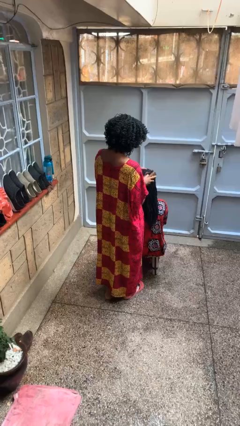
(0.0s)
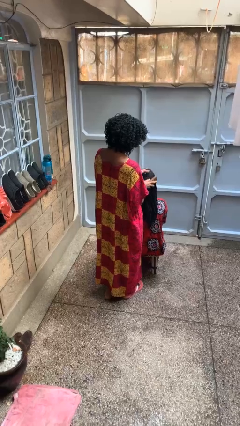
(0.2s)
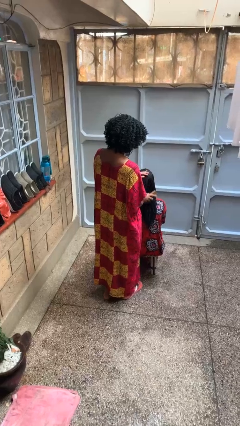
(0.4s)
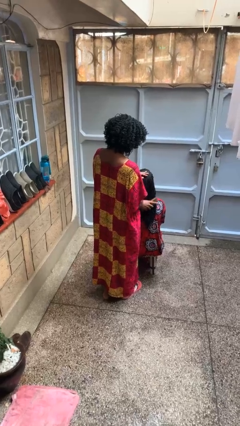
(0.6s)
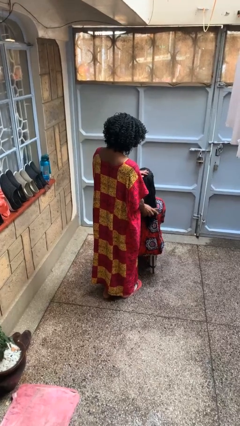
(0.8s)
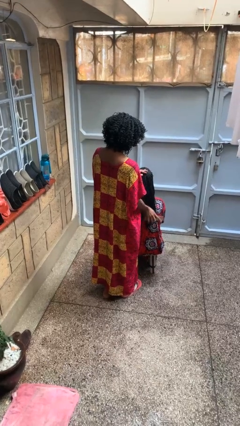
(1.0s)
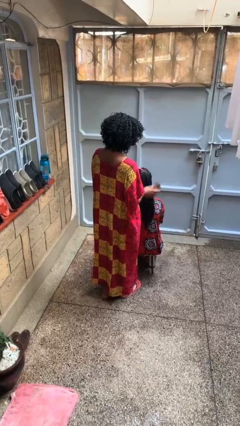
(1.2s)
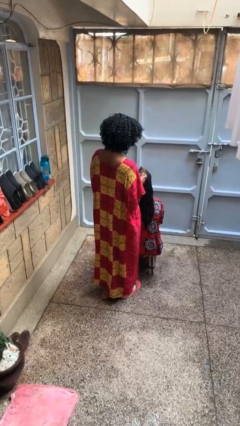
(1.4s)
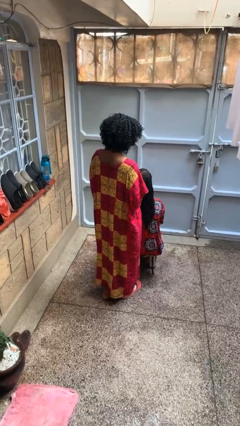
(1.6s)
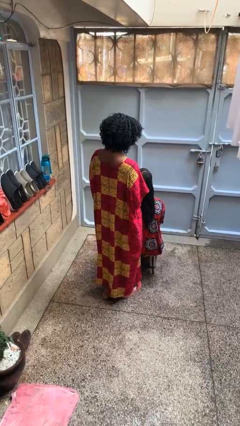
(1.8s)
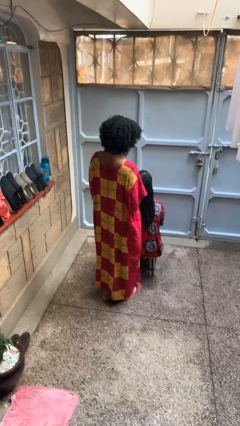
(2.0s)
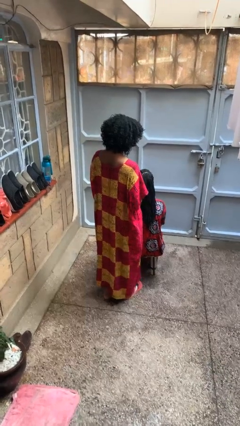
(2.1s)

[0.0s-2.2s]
person brushes hair of person

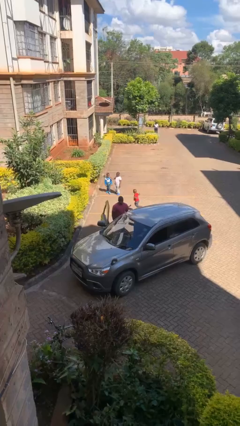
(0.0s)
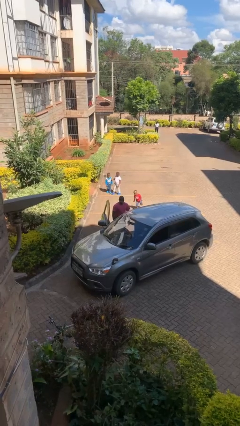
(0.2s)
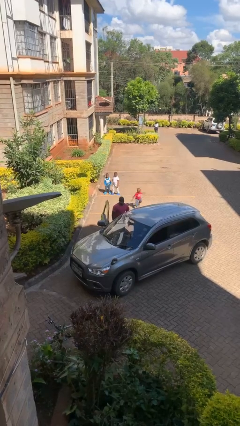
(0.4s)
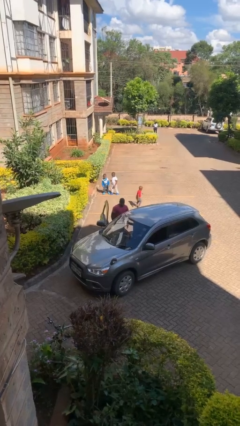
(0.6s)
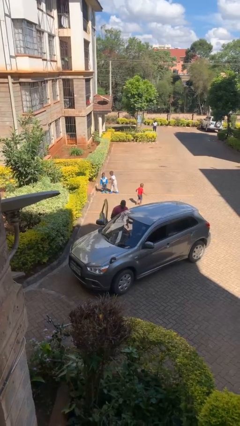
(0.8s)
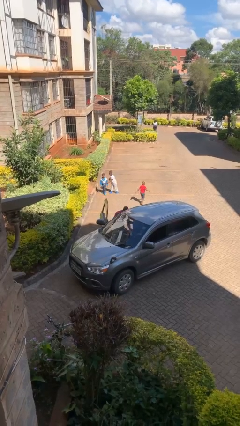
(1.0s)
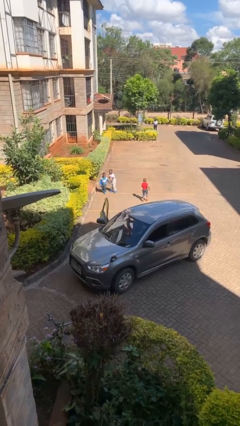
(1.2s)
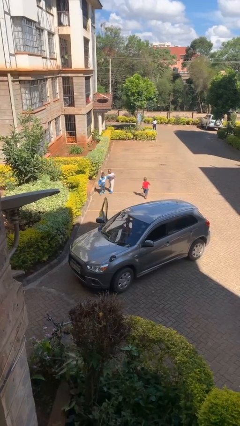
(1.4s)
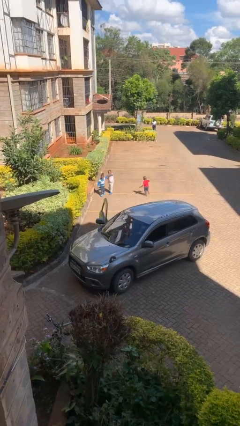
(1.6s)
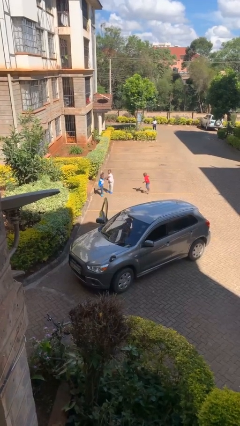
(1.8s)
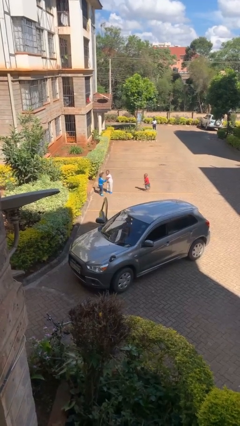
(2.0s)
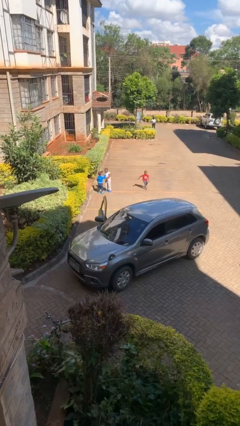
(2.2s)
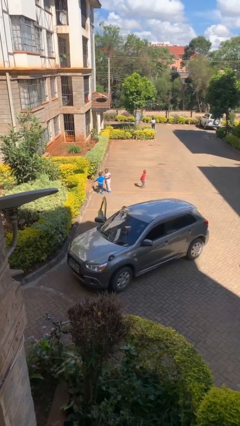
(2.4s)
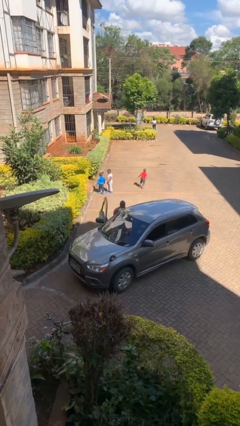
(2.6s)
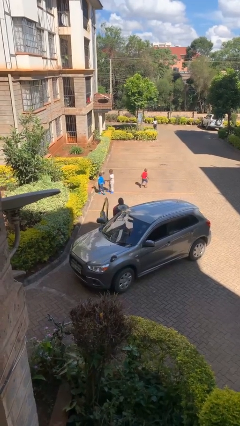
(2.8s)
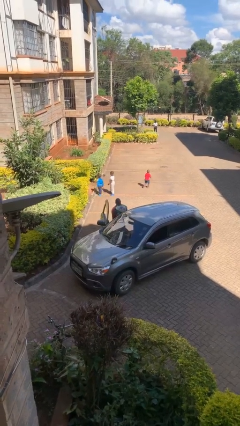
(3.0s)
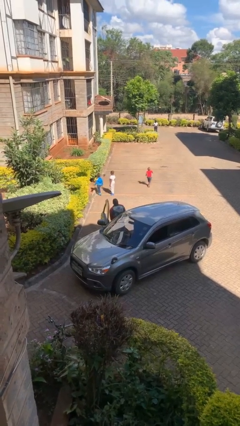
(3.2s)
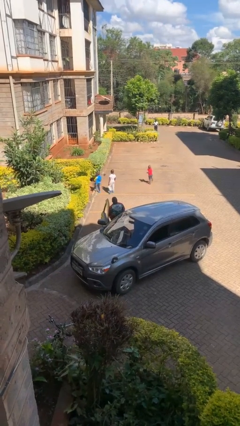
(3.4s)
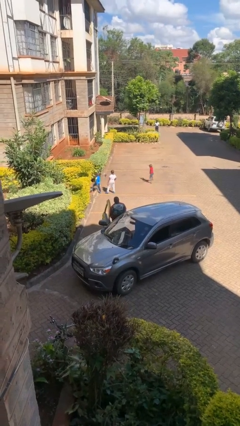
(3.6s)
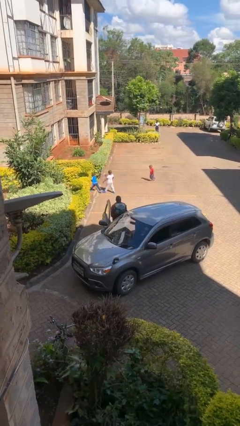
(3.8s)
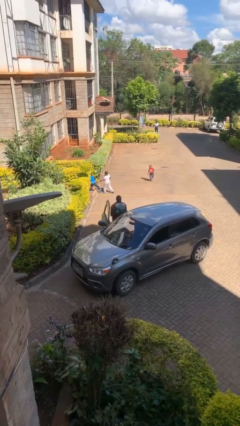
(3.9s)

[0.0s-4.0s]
person unloads car

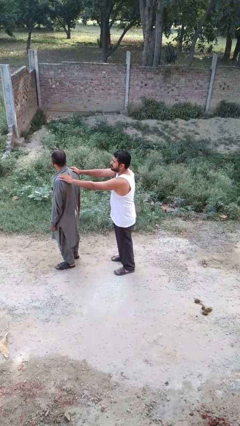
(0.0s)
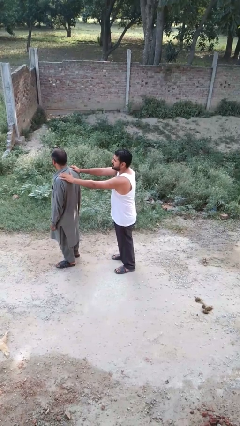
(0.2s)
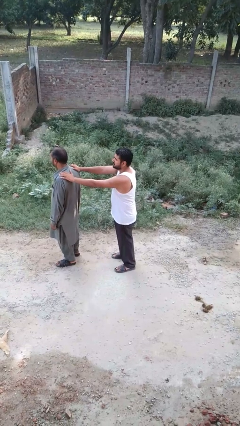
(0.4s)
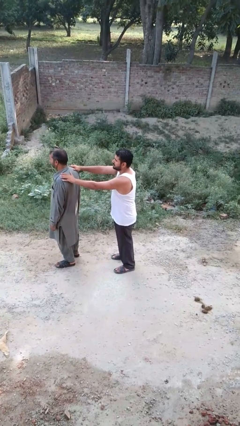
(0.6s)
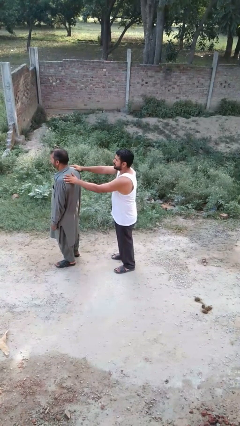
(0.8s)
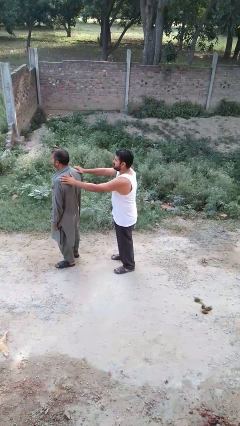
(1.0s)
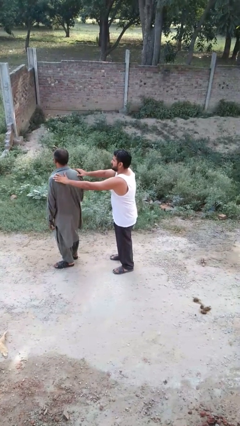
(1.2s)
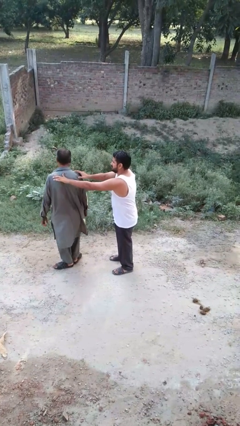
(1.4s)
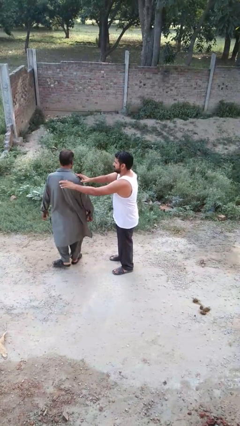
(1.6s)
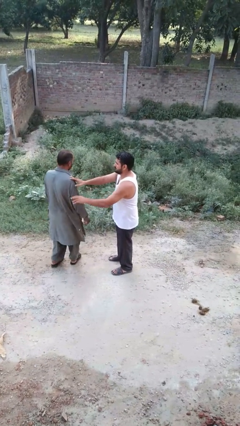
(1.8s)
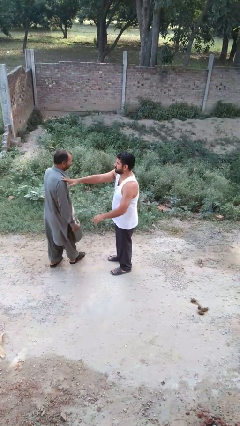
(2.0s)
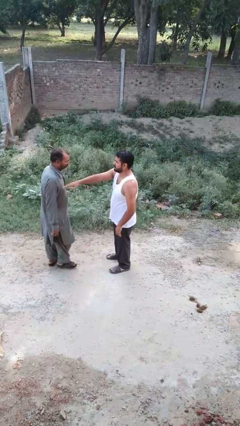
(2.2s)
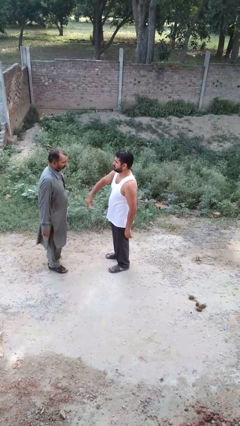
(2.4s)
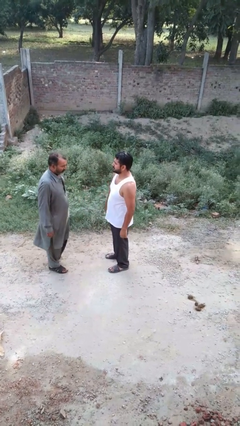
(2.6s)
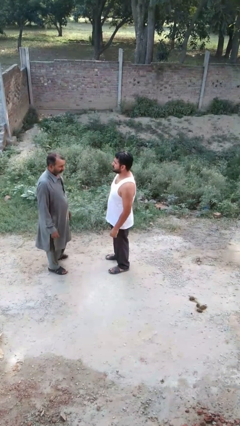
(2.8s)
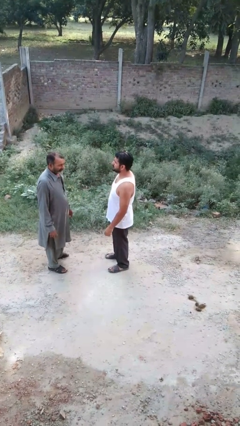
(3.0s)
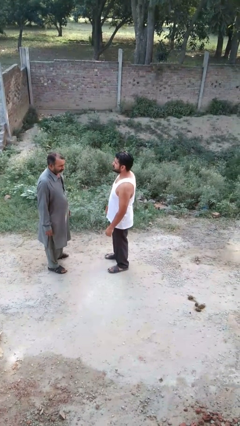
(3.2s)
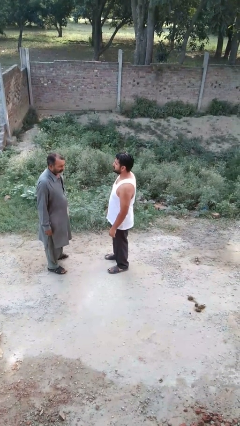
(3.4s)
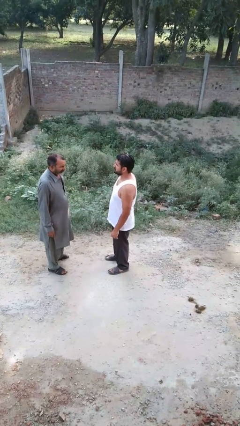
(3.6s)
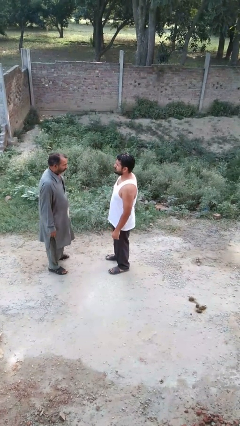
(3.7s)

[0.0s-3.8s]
person spins person around

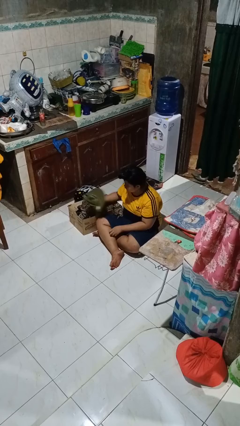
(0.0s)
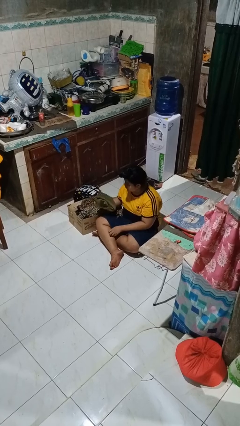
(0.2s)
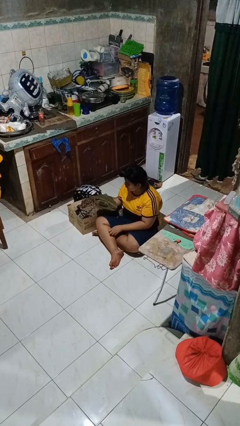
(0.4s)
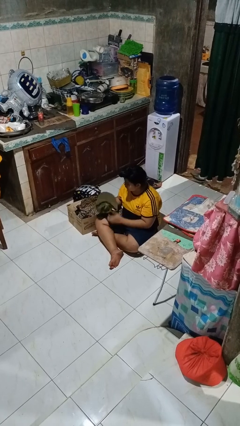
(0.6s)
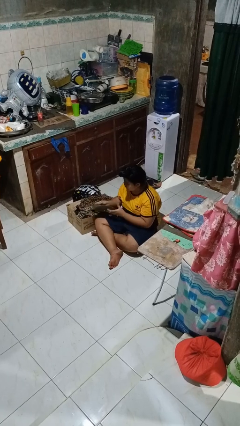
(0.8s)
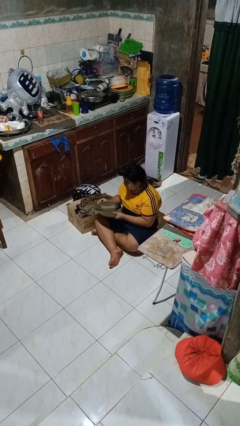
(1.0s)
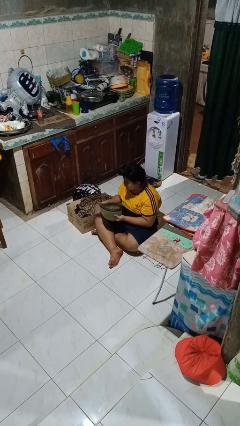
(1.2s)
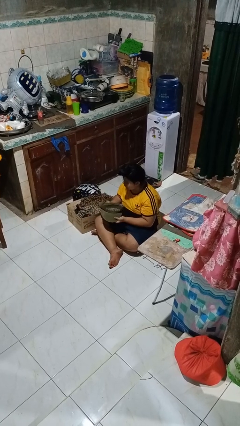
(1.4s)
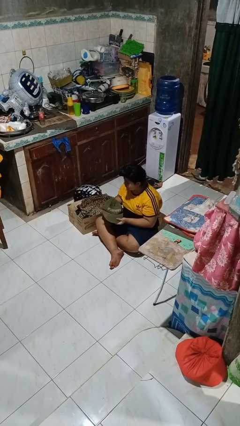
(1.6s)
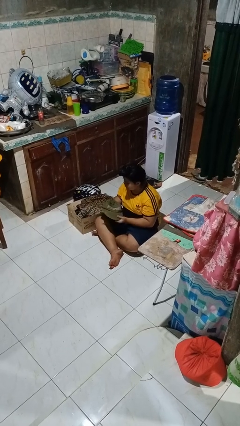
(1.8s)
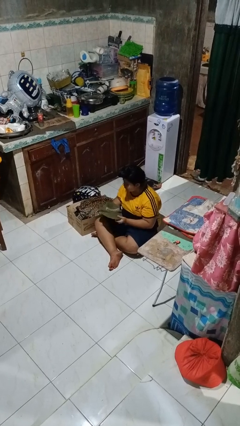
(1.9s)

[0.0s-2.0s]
person takes object from box

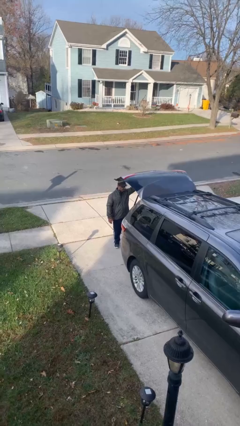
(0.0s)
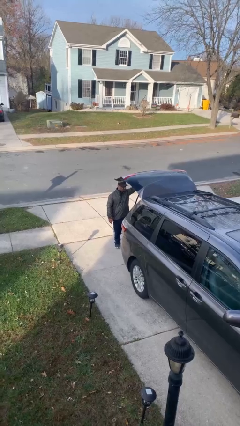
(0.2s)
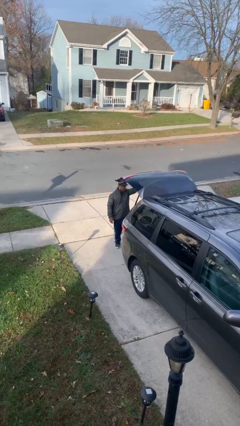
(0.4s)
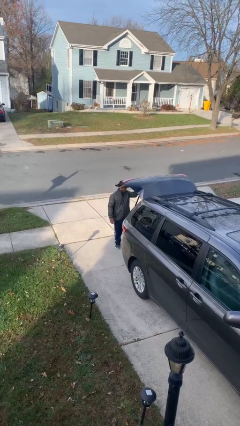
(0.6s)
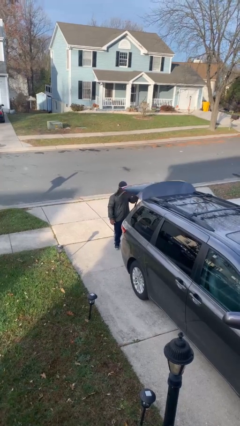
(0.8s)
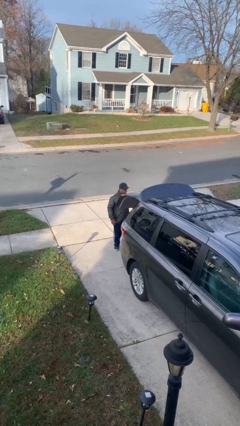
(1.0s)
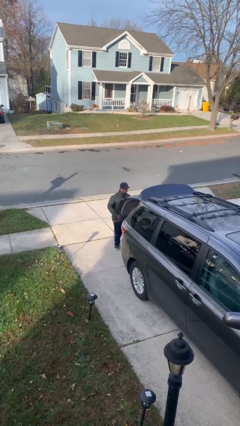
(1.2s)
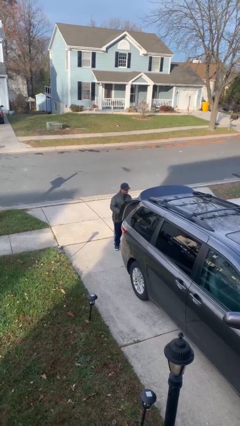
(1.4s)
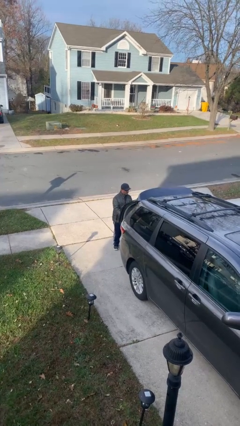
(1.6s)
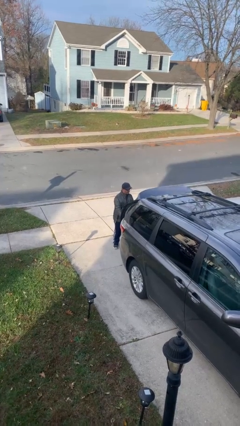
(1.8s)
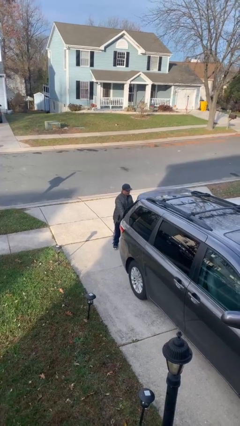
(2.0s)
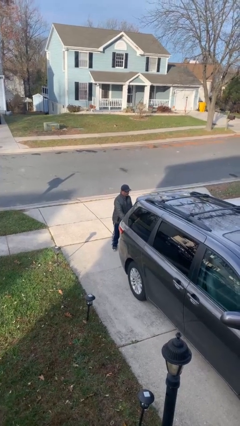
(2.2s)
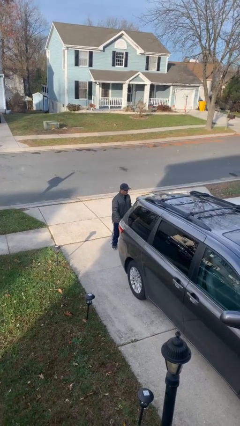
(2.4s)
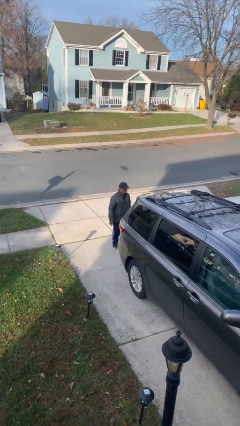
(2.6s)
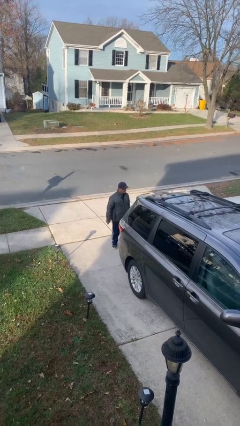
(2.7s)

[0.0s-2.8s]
person closes car trunk

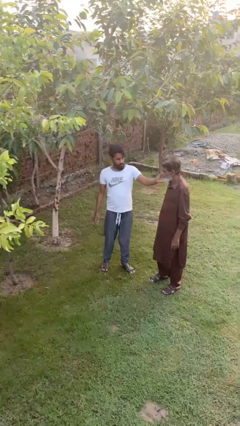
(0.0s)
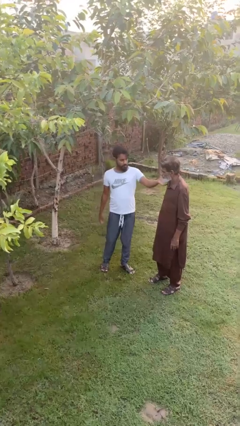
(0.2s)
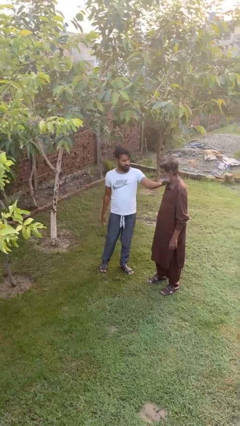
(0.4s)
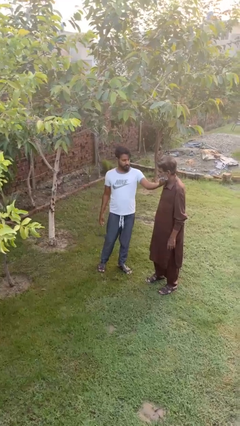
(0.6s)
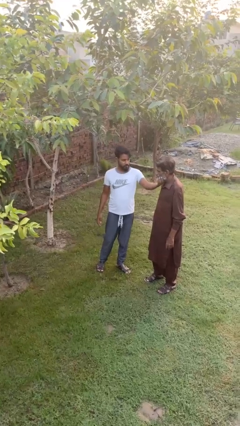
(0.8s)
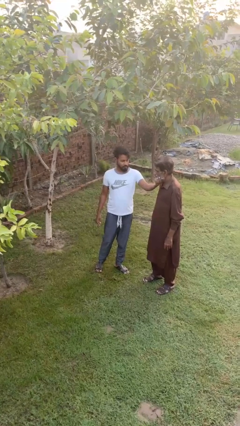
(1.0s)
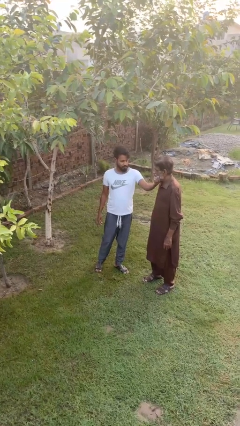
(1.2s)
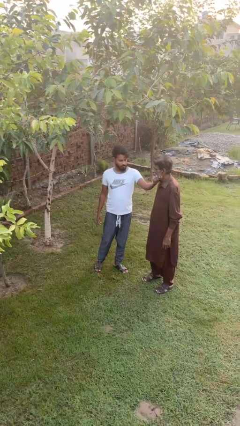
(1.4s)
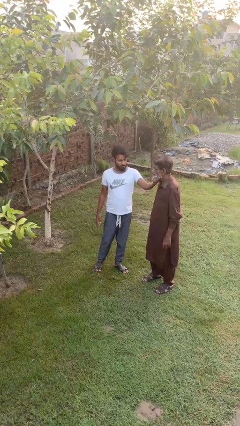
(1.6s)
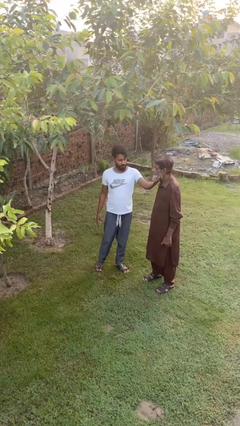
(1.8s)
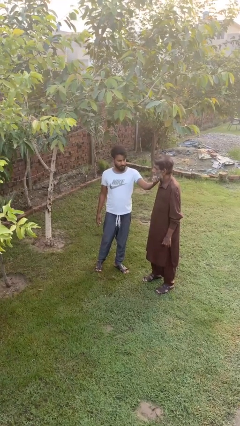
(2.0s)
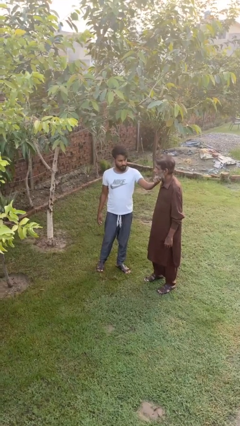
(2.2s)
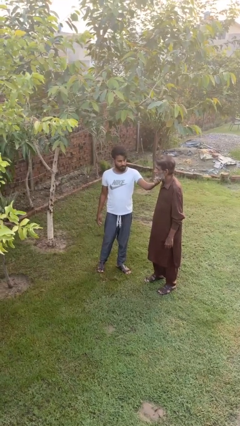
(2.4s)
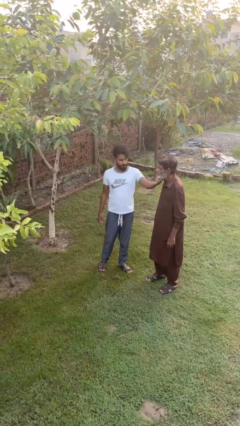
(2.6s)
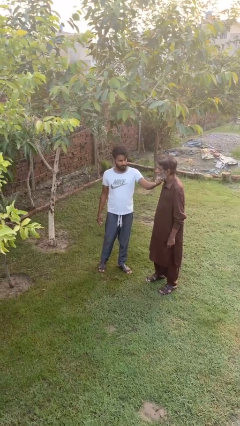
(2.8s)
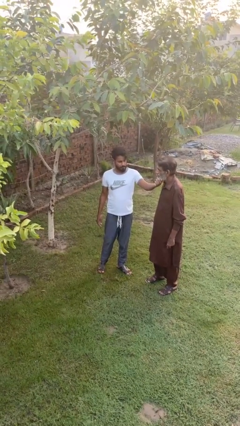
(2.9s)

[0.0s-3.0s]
person touches face of person
